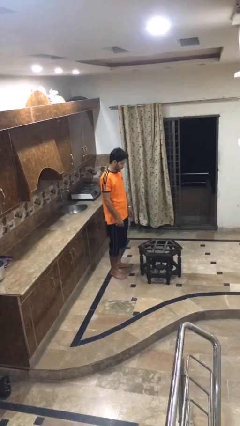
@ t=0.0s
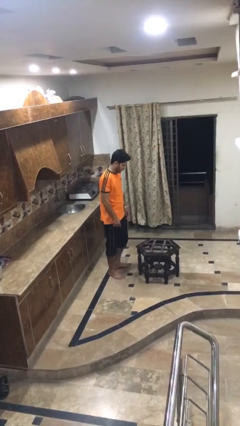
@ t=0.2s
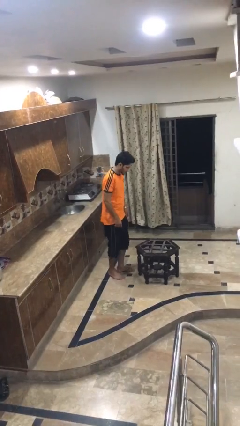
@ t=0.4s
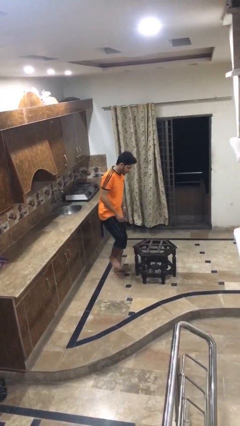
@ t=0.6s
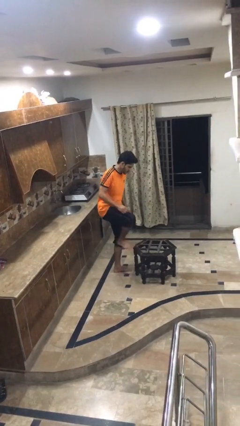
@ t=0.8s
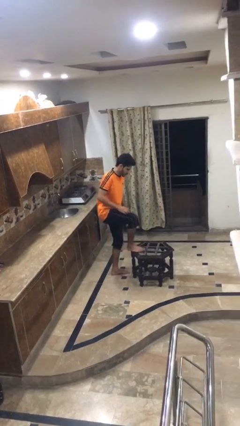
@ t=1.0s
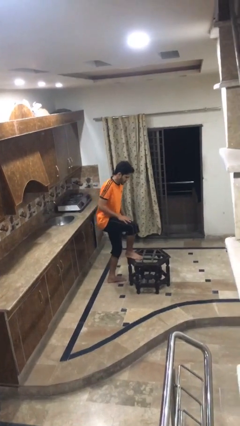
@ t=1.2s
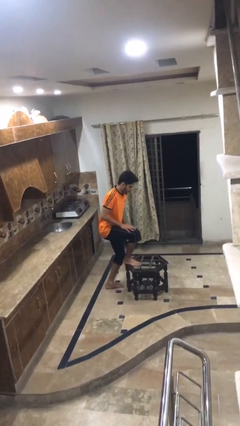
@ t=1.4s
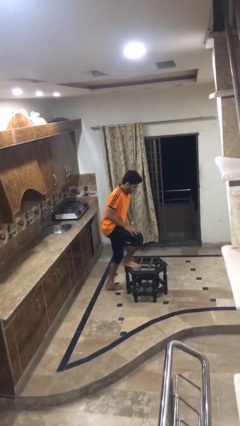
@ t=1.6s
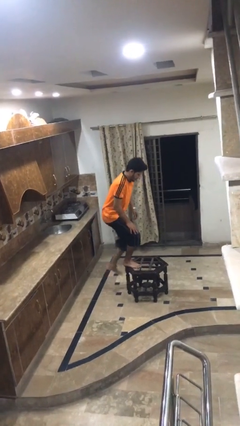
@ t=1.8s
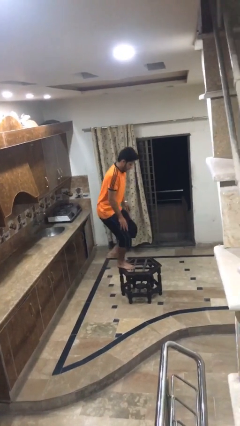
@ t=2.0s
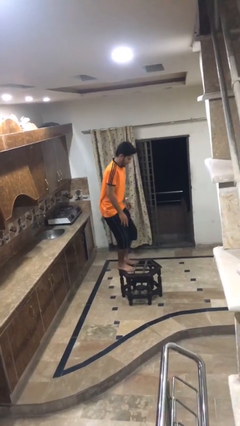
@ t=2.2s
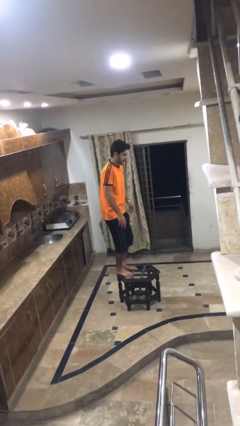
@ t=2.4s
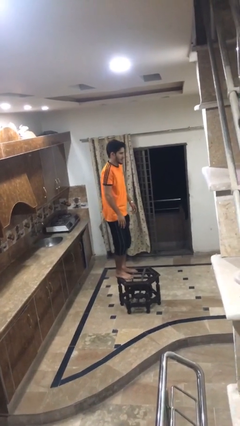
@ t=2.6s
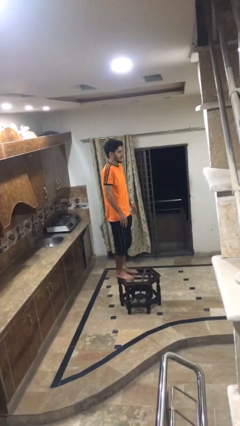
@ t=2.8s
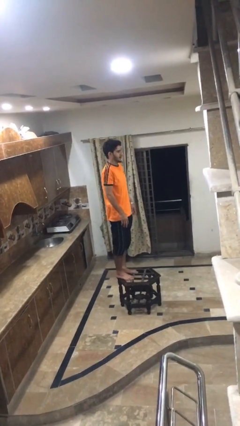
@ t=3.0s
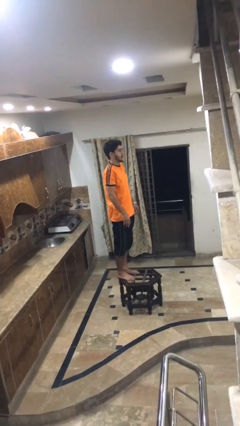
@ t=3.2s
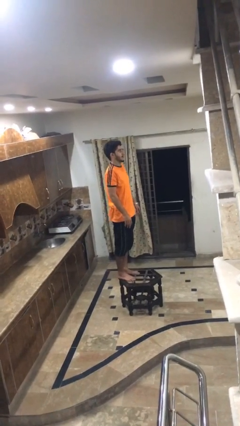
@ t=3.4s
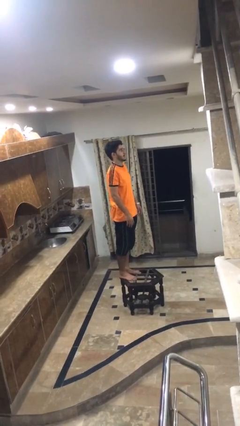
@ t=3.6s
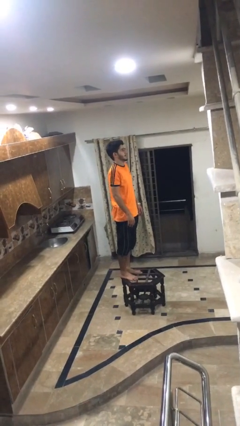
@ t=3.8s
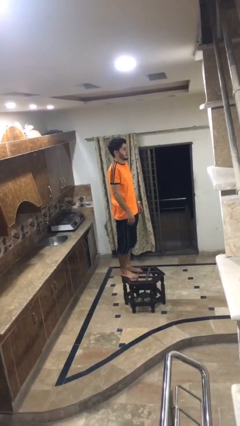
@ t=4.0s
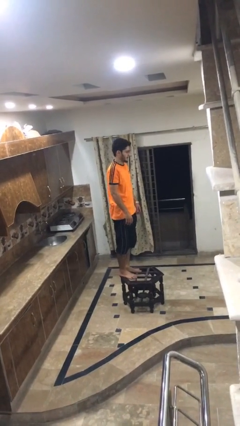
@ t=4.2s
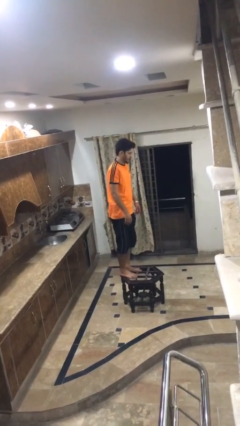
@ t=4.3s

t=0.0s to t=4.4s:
person climbs on table

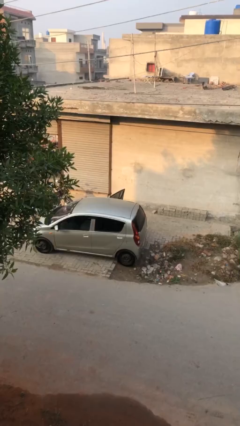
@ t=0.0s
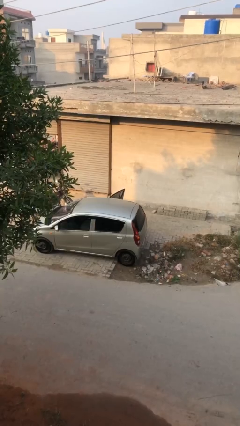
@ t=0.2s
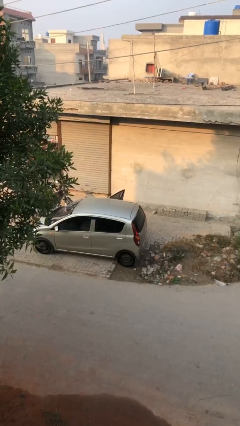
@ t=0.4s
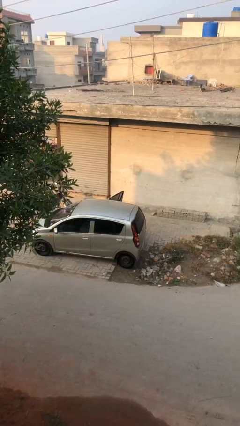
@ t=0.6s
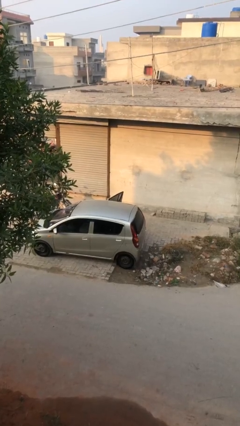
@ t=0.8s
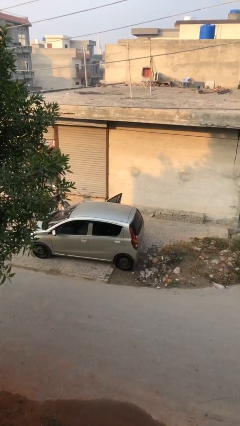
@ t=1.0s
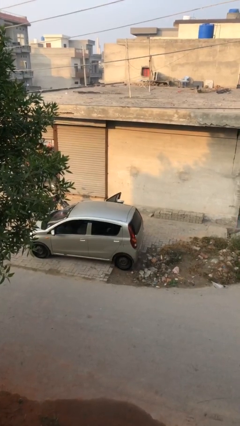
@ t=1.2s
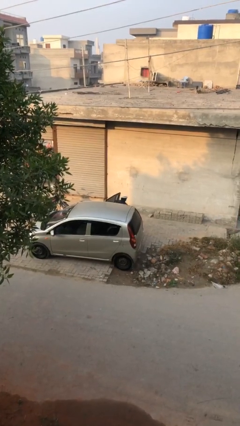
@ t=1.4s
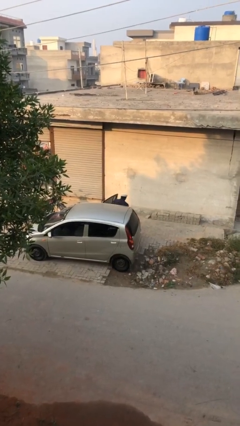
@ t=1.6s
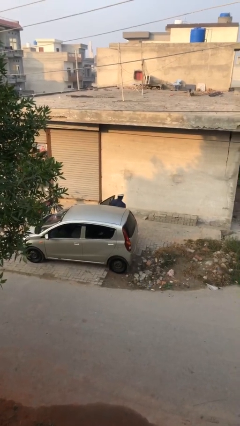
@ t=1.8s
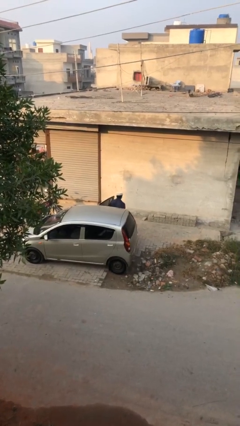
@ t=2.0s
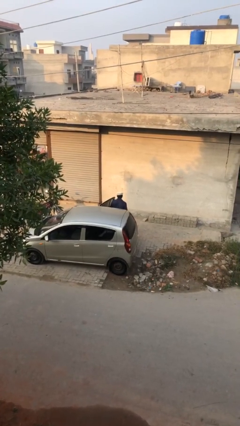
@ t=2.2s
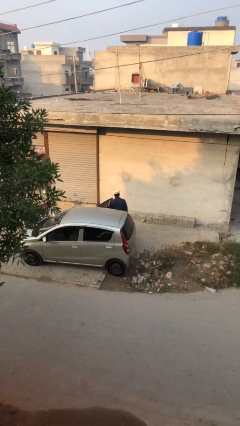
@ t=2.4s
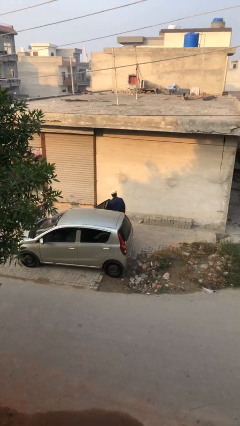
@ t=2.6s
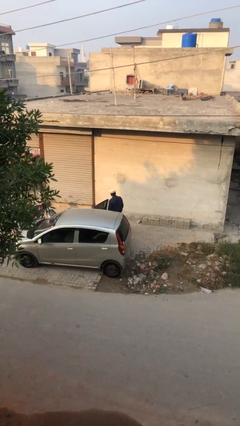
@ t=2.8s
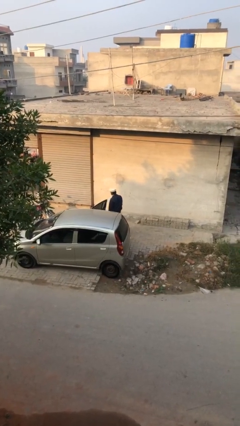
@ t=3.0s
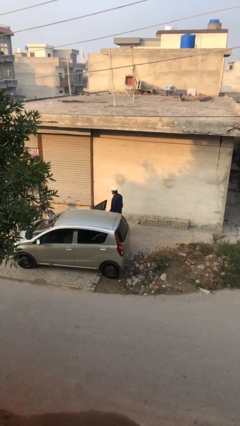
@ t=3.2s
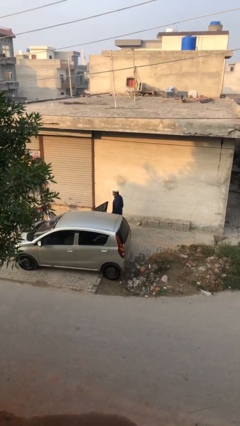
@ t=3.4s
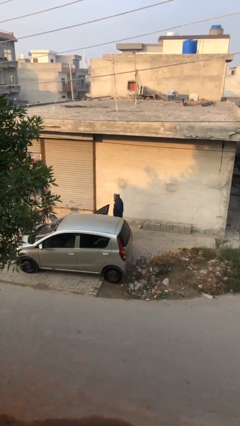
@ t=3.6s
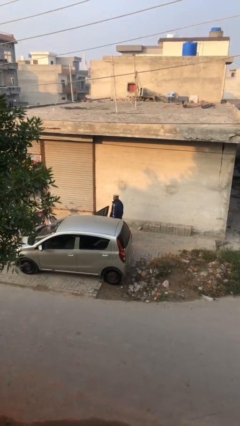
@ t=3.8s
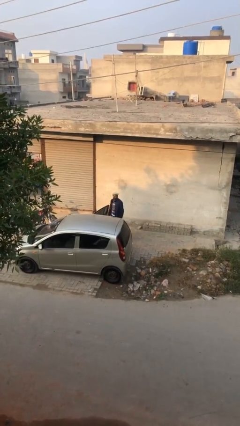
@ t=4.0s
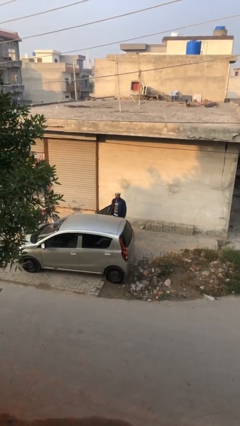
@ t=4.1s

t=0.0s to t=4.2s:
person exits car

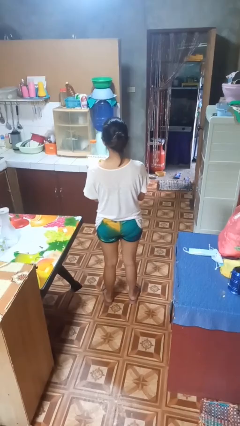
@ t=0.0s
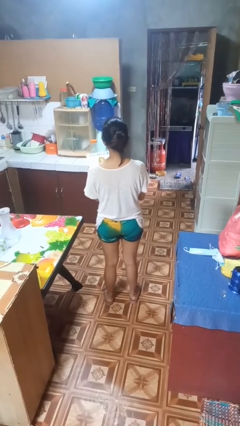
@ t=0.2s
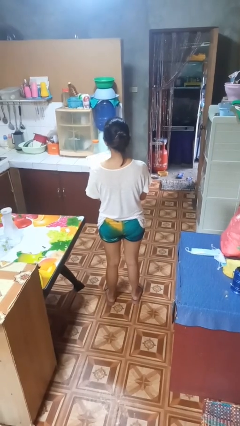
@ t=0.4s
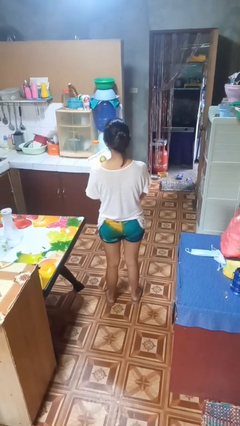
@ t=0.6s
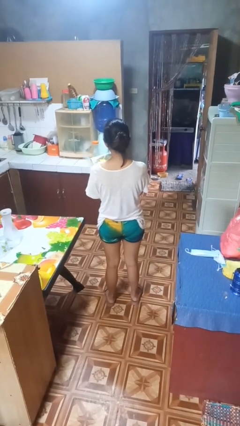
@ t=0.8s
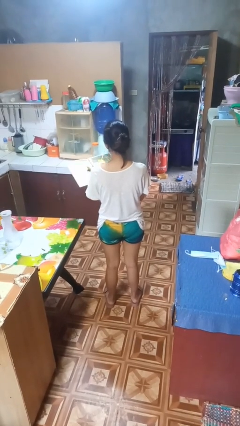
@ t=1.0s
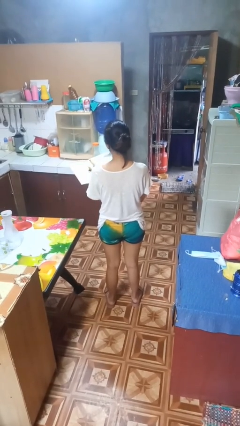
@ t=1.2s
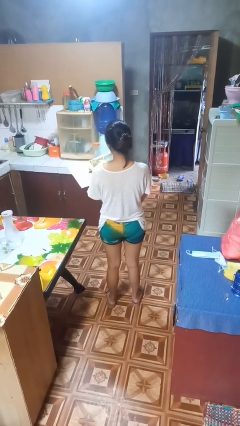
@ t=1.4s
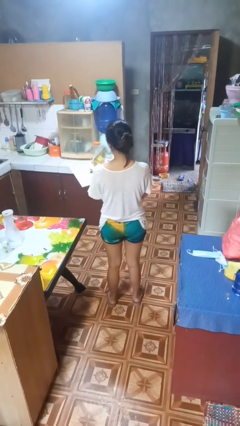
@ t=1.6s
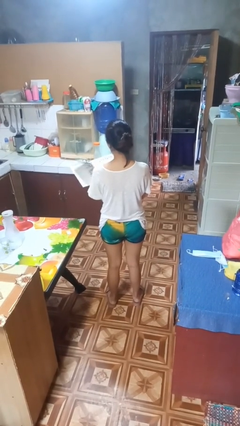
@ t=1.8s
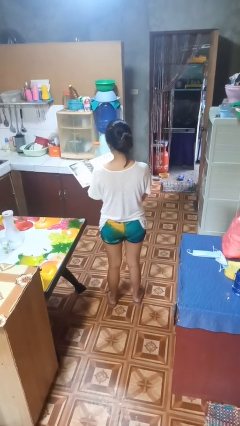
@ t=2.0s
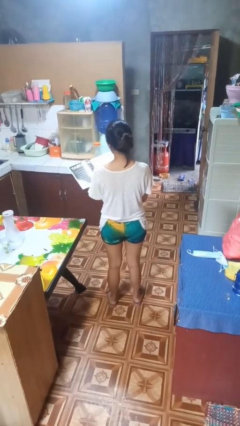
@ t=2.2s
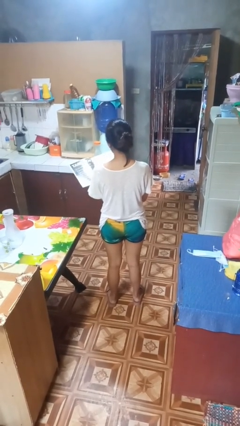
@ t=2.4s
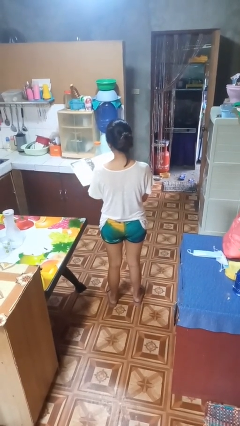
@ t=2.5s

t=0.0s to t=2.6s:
person reads magazine

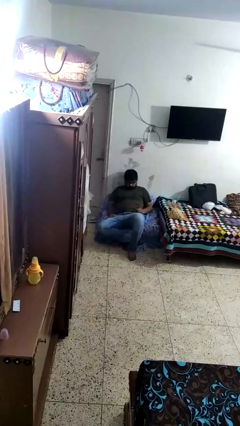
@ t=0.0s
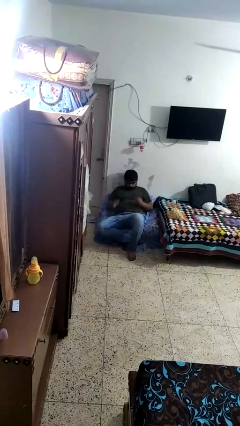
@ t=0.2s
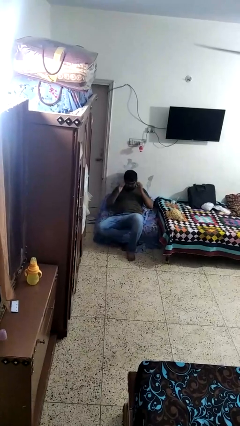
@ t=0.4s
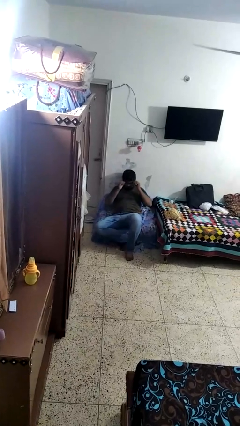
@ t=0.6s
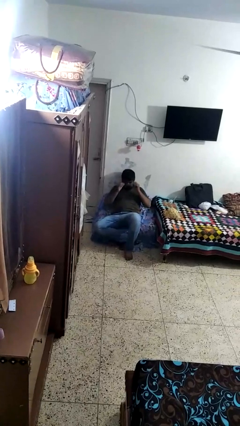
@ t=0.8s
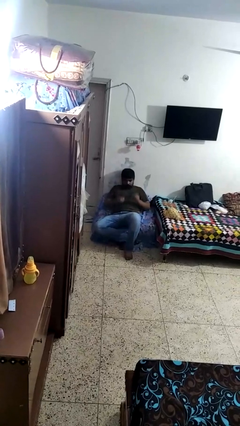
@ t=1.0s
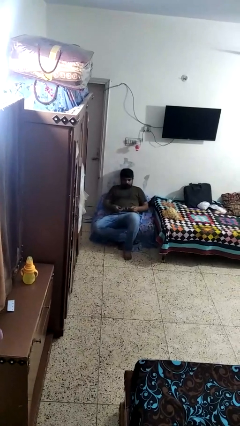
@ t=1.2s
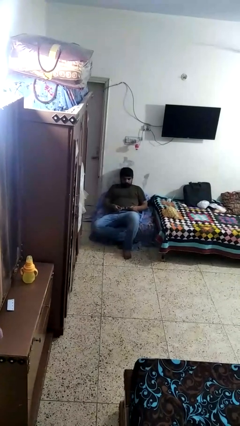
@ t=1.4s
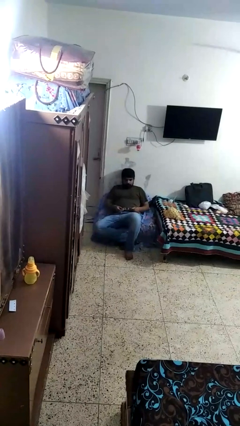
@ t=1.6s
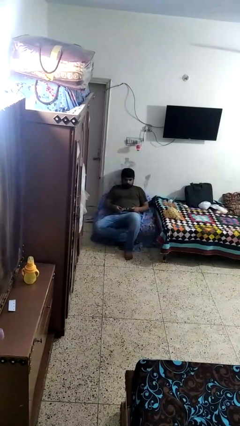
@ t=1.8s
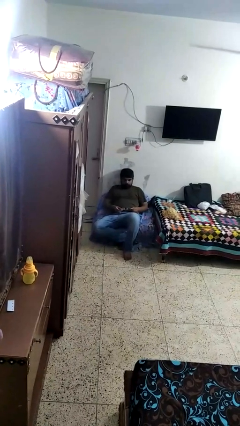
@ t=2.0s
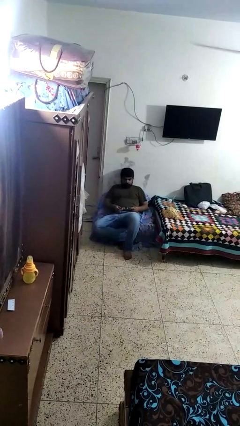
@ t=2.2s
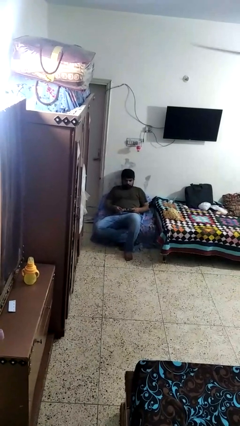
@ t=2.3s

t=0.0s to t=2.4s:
person takes off glasses

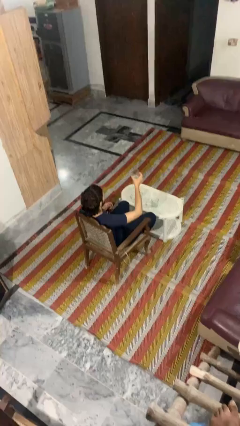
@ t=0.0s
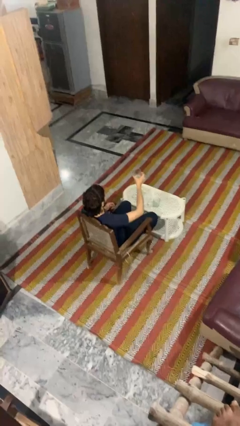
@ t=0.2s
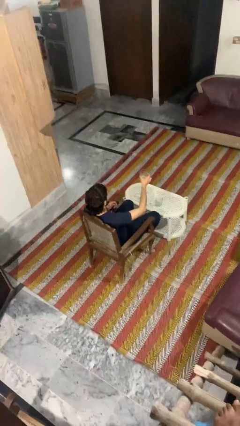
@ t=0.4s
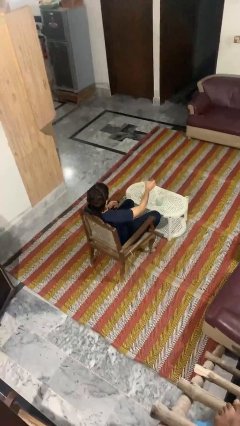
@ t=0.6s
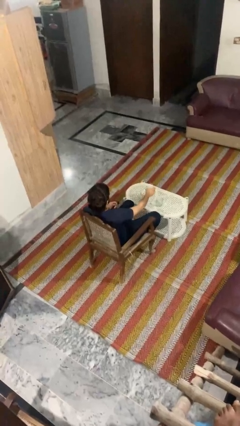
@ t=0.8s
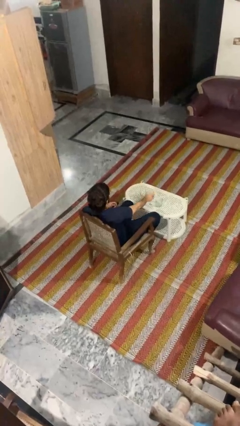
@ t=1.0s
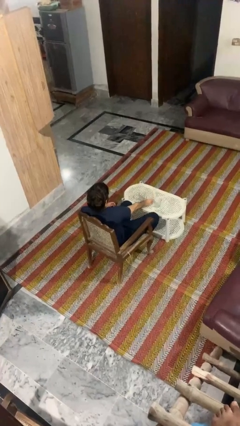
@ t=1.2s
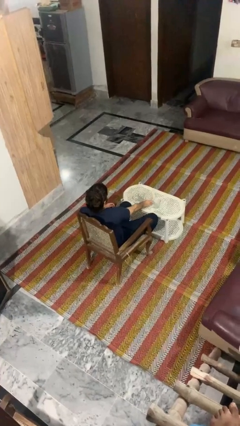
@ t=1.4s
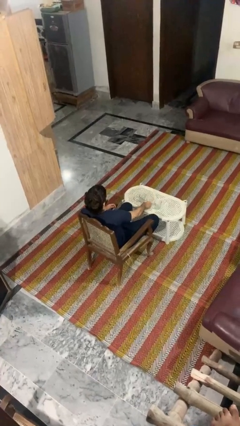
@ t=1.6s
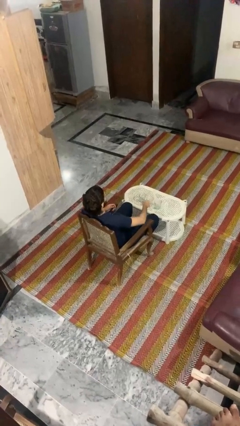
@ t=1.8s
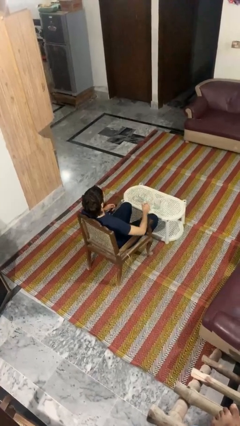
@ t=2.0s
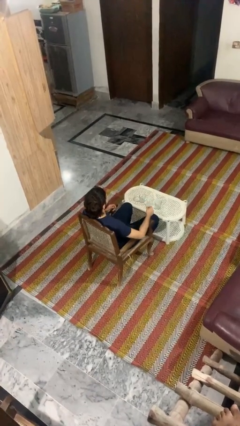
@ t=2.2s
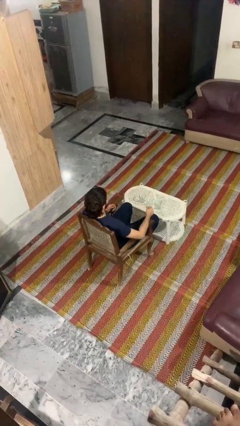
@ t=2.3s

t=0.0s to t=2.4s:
person puts down object on table

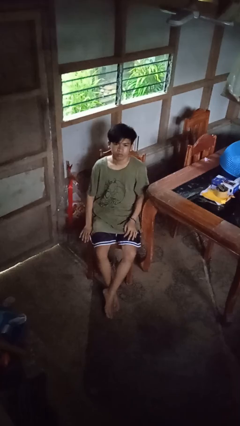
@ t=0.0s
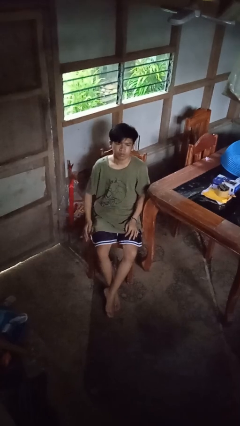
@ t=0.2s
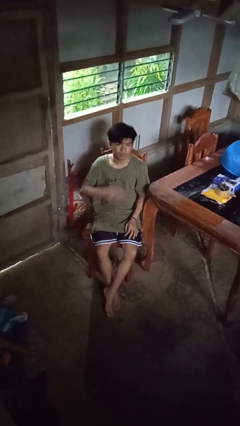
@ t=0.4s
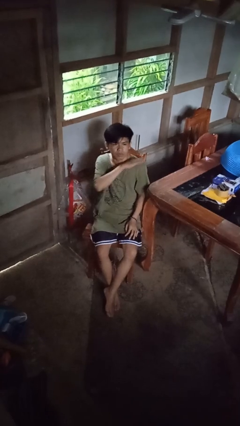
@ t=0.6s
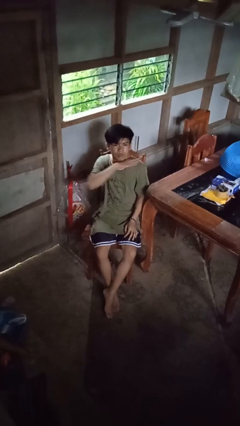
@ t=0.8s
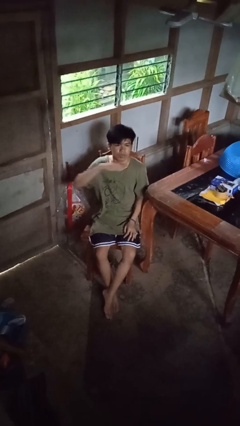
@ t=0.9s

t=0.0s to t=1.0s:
person gestures cut

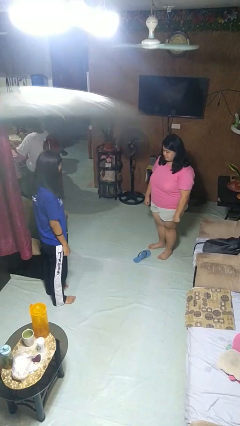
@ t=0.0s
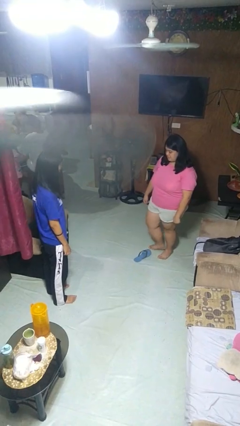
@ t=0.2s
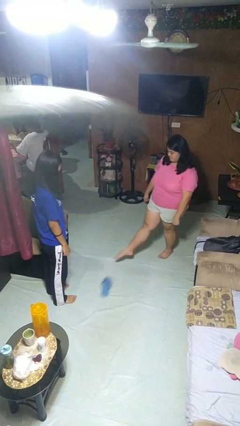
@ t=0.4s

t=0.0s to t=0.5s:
person kicks object to person
